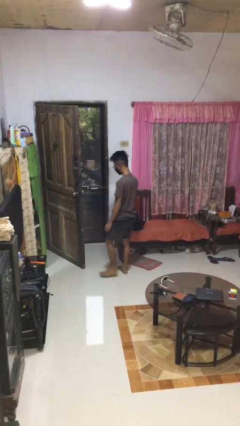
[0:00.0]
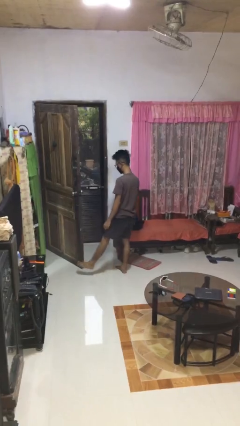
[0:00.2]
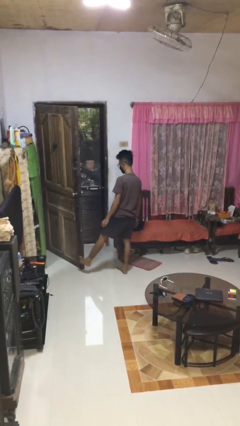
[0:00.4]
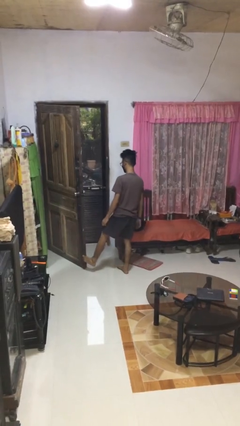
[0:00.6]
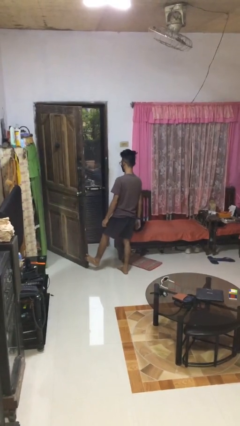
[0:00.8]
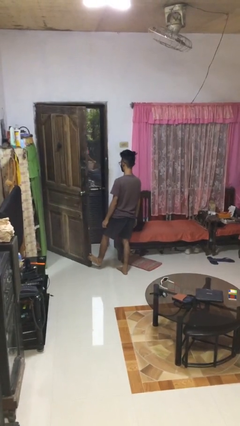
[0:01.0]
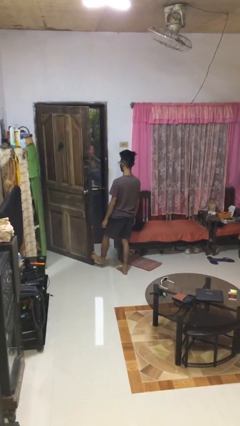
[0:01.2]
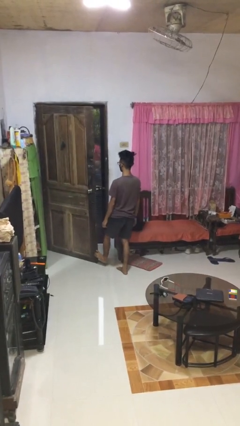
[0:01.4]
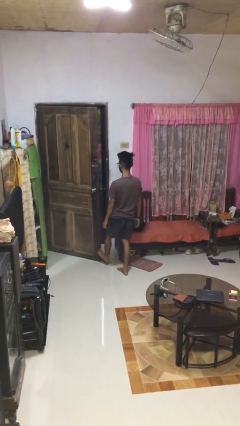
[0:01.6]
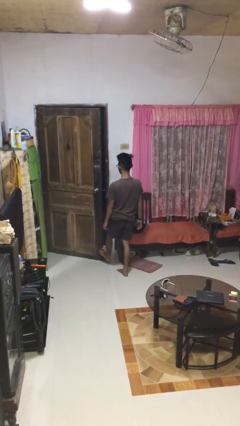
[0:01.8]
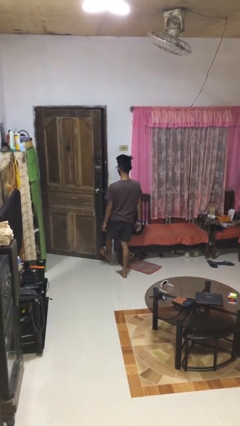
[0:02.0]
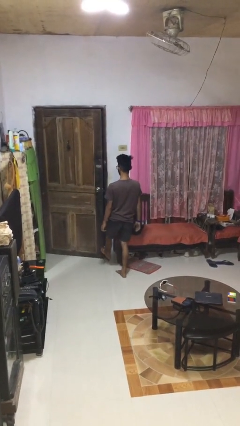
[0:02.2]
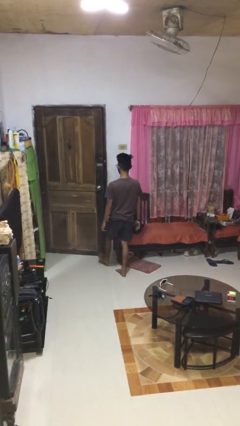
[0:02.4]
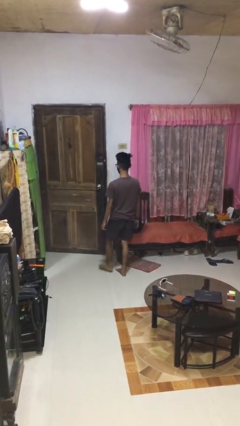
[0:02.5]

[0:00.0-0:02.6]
person closes door with foot

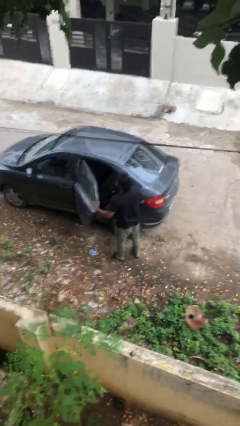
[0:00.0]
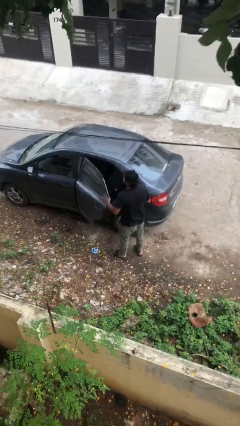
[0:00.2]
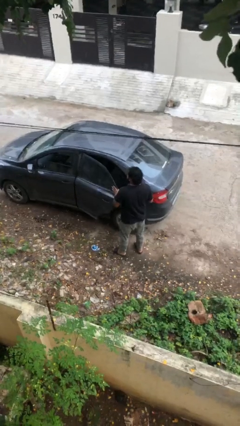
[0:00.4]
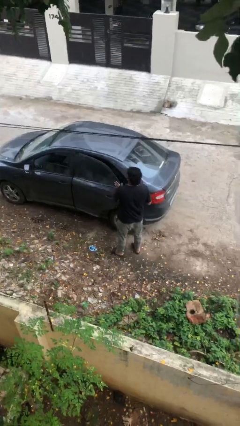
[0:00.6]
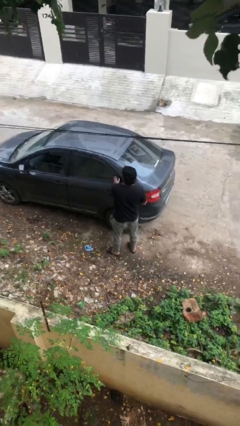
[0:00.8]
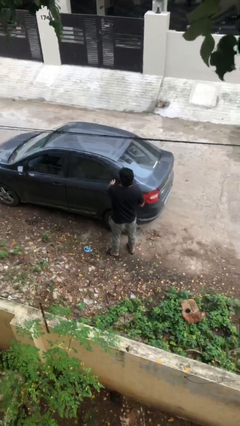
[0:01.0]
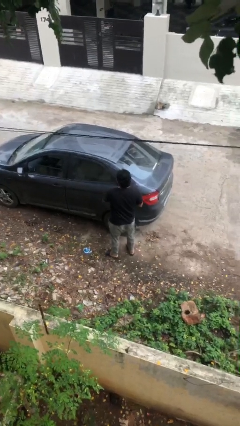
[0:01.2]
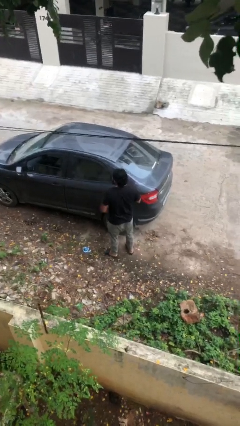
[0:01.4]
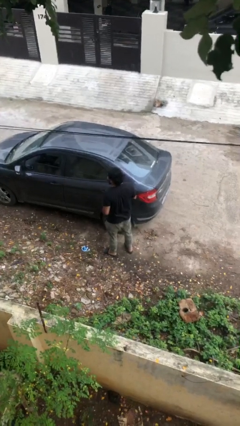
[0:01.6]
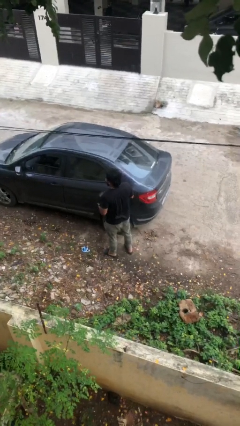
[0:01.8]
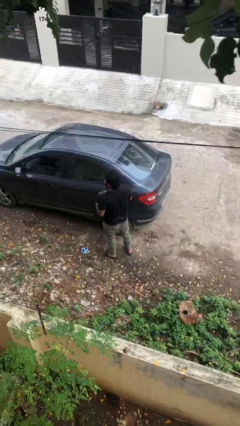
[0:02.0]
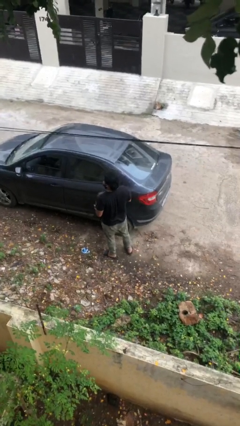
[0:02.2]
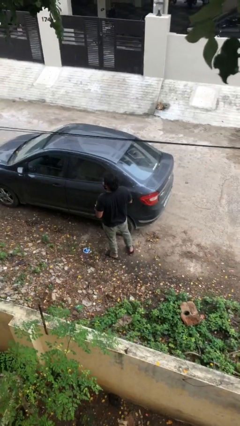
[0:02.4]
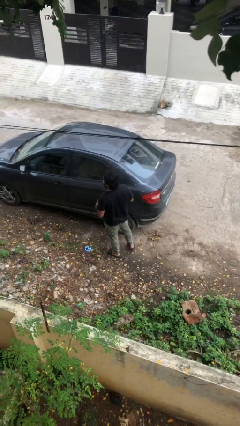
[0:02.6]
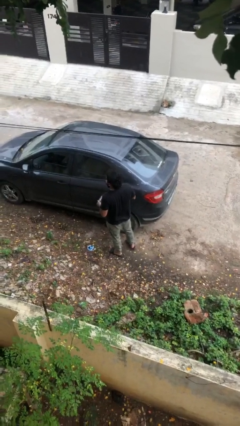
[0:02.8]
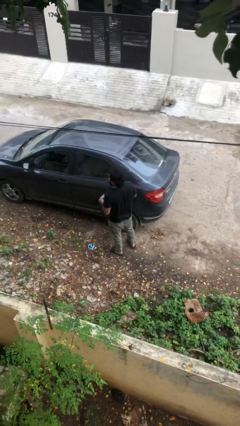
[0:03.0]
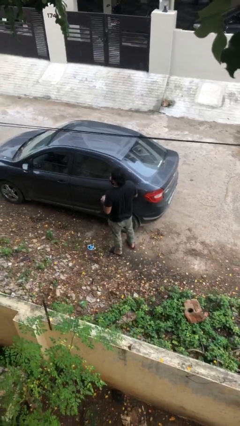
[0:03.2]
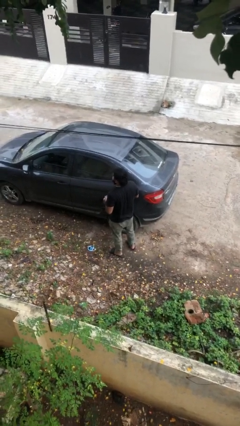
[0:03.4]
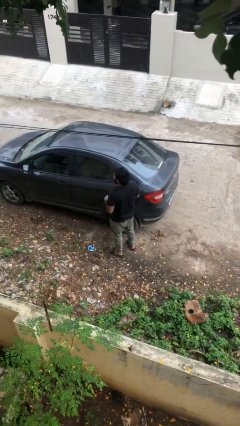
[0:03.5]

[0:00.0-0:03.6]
person closes car door

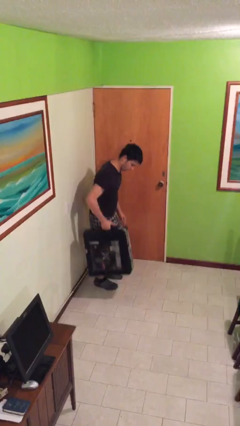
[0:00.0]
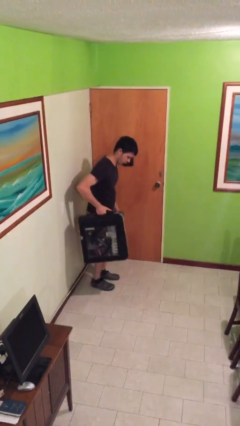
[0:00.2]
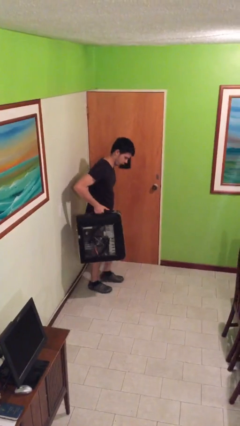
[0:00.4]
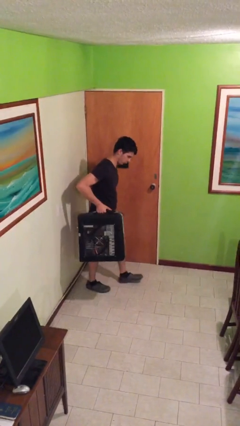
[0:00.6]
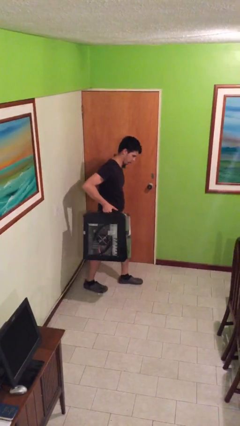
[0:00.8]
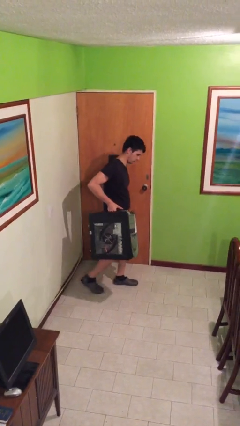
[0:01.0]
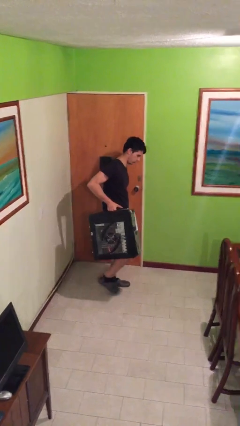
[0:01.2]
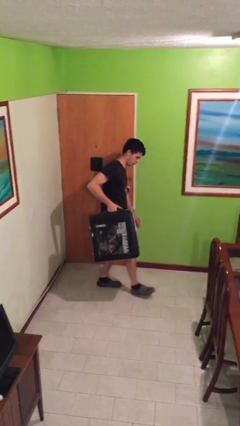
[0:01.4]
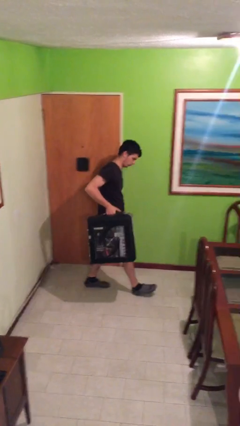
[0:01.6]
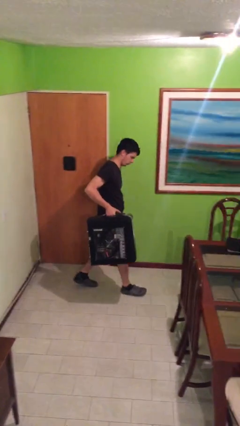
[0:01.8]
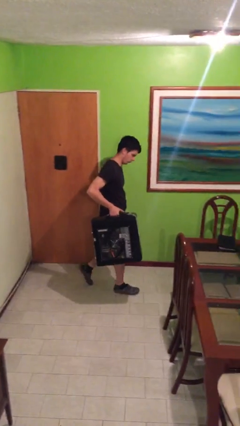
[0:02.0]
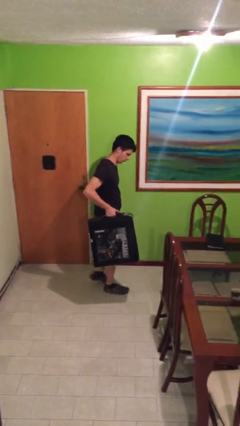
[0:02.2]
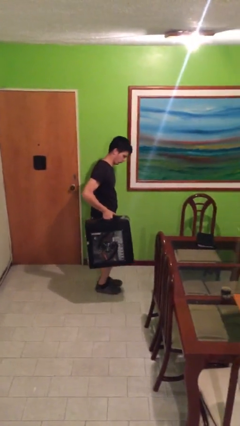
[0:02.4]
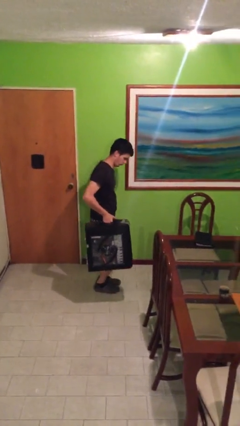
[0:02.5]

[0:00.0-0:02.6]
person carries heavy object

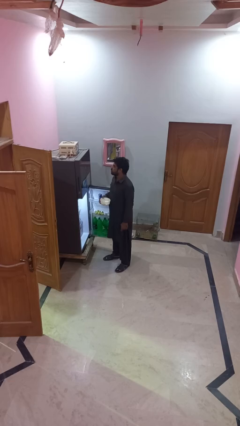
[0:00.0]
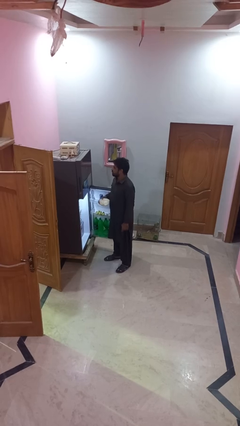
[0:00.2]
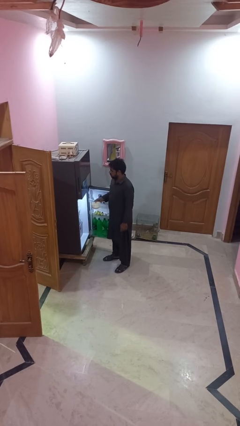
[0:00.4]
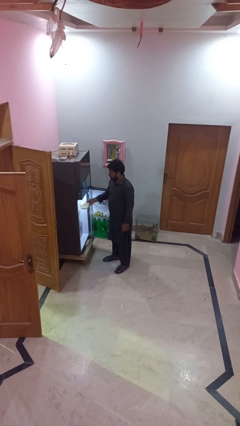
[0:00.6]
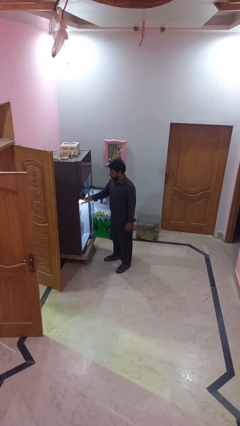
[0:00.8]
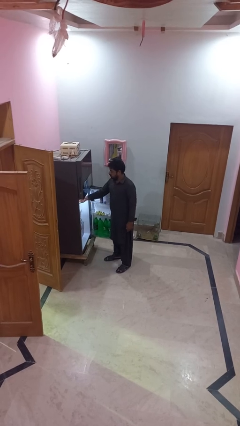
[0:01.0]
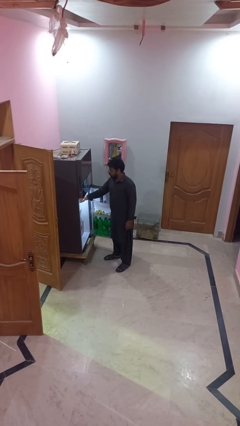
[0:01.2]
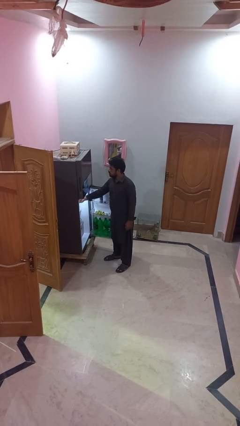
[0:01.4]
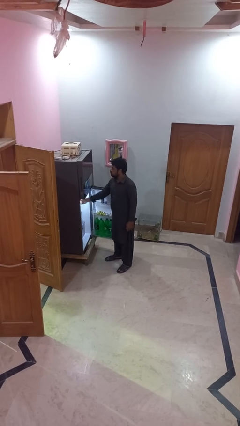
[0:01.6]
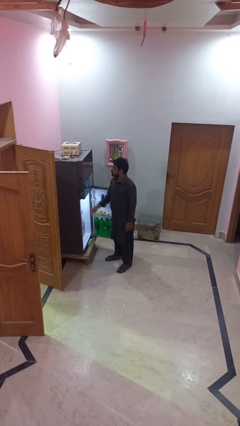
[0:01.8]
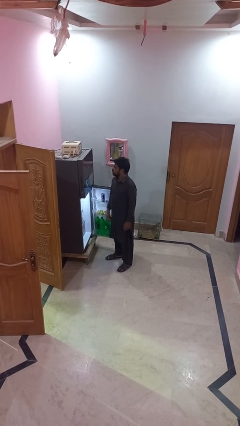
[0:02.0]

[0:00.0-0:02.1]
person puts object into refrigerator

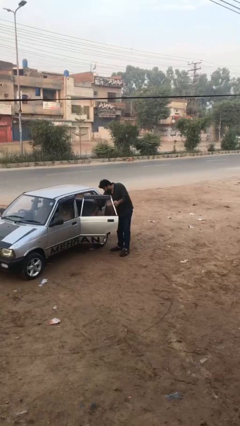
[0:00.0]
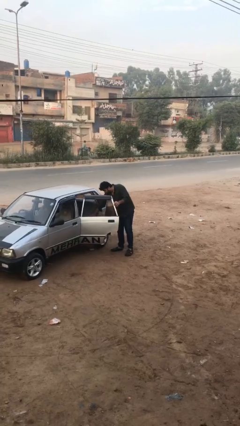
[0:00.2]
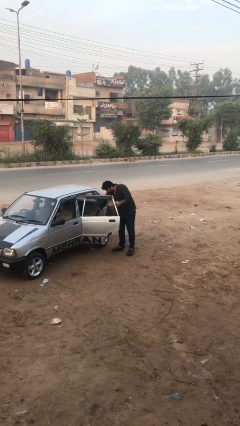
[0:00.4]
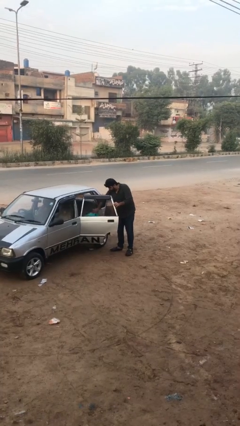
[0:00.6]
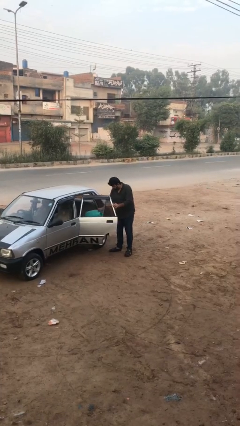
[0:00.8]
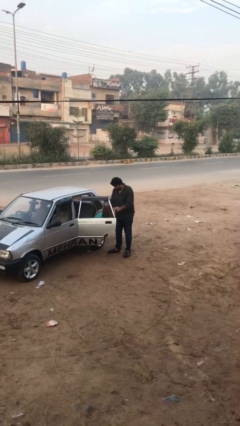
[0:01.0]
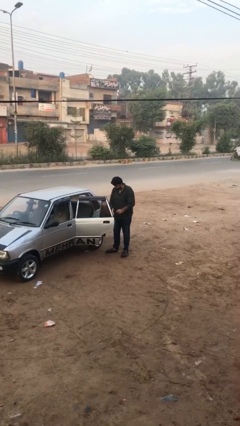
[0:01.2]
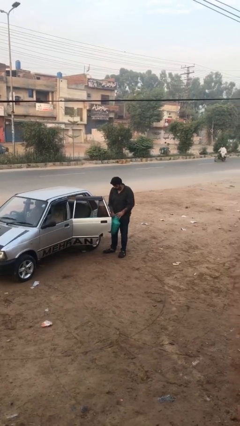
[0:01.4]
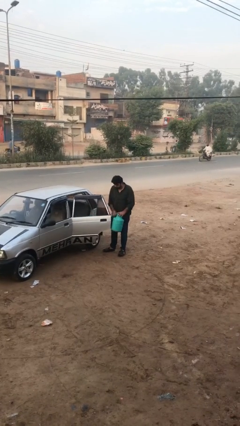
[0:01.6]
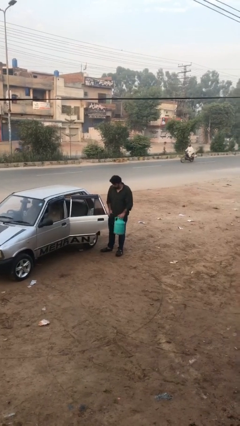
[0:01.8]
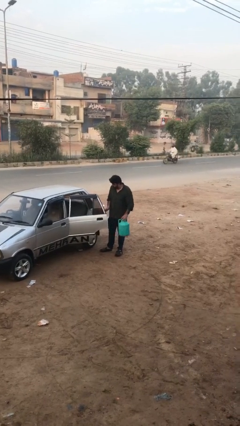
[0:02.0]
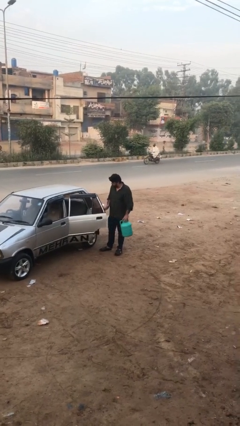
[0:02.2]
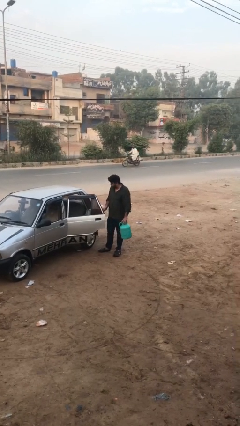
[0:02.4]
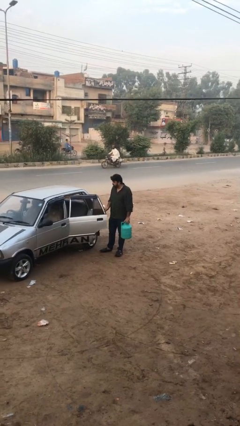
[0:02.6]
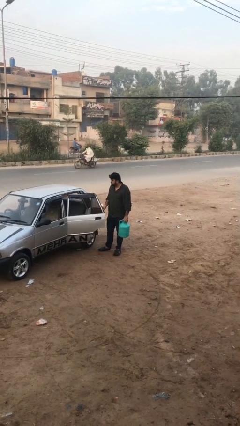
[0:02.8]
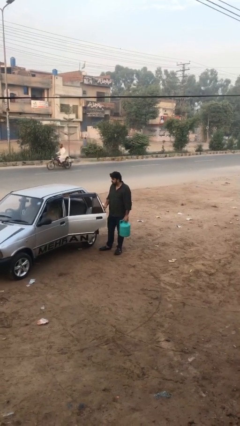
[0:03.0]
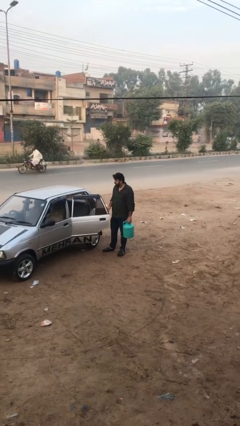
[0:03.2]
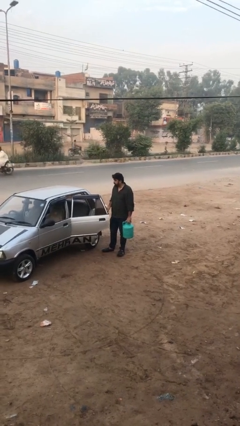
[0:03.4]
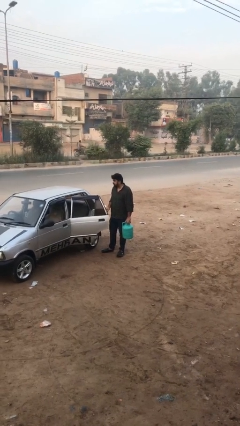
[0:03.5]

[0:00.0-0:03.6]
person unloads car

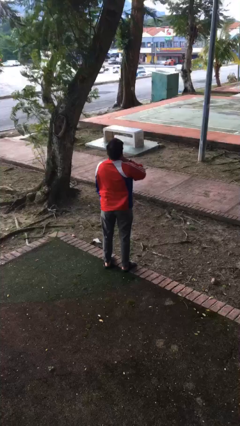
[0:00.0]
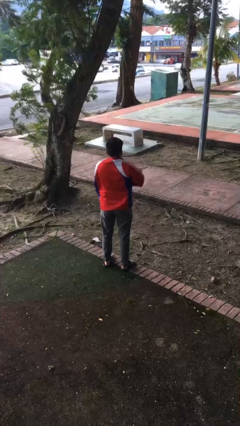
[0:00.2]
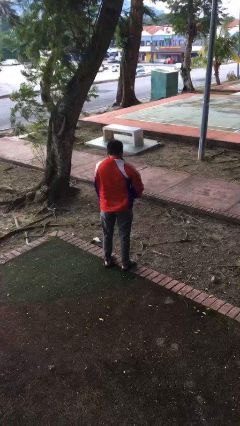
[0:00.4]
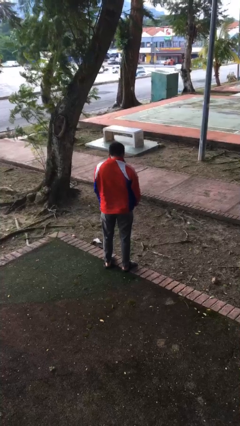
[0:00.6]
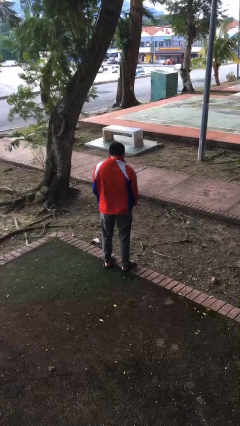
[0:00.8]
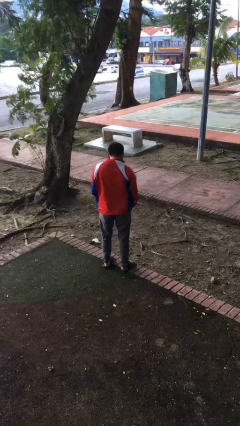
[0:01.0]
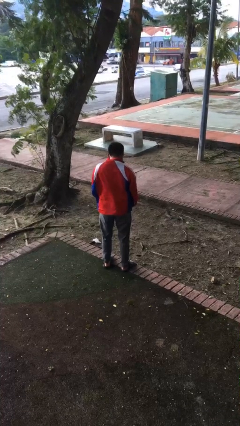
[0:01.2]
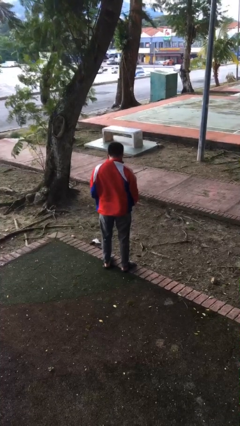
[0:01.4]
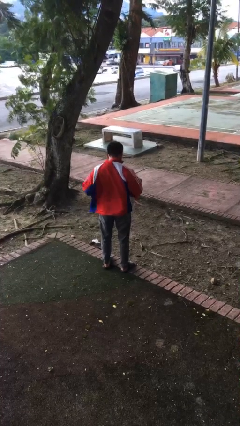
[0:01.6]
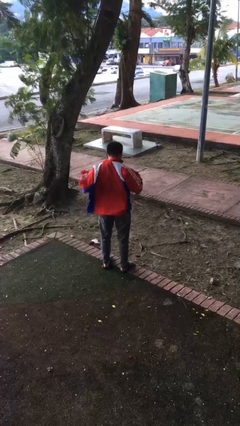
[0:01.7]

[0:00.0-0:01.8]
person unzips jacket

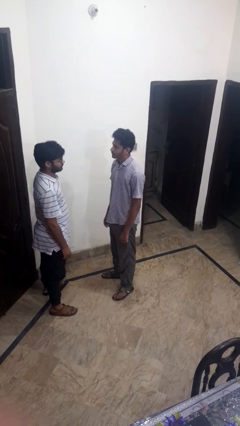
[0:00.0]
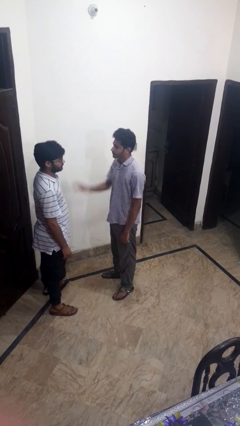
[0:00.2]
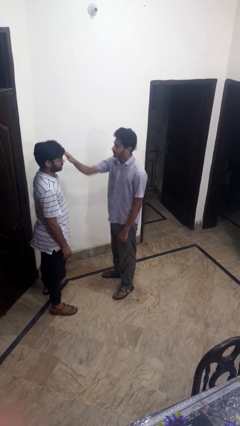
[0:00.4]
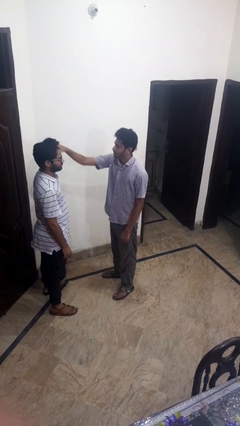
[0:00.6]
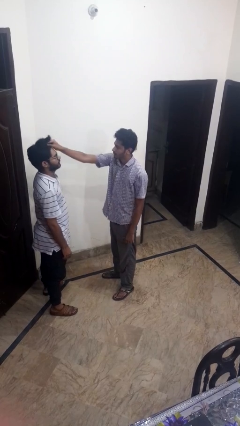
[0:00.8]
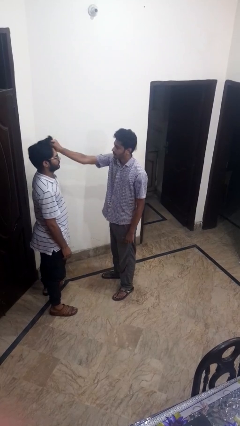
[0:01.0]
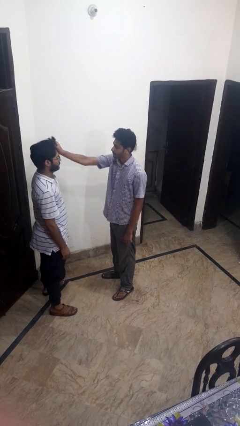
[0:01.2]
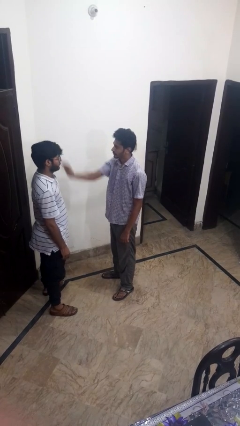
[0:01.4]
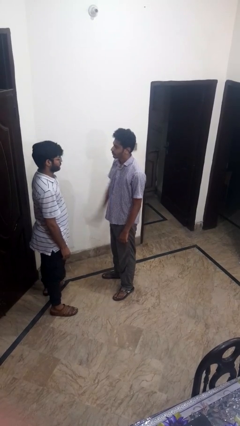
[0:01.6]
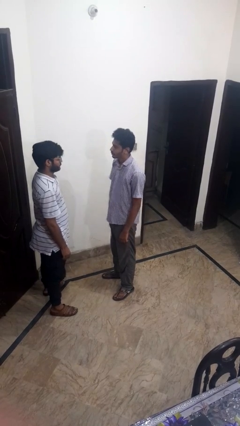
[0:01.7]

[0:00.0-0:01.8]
person grabs person by hair
